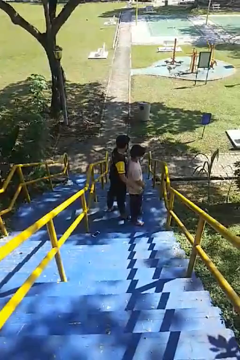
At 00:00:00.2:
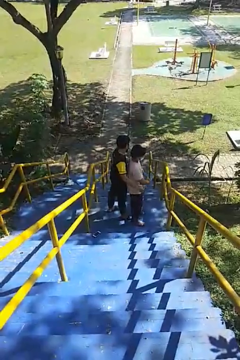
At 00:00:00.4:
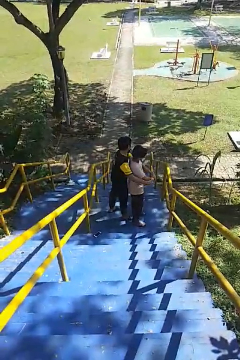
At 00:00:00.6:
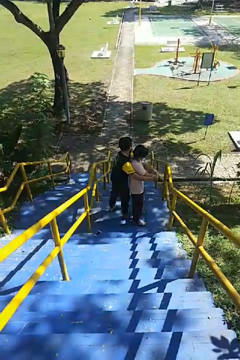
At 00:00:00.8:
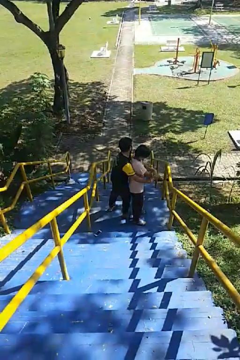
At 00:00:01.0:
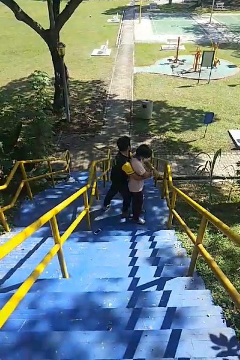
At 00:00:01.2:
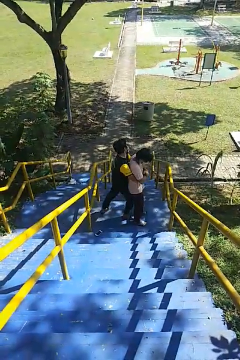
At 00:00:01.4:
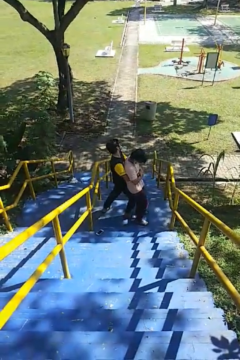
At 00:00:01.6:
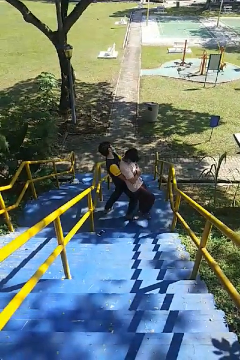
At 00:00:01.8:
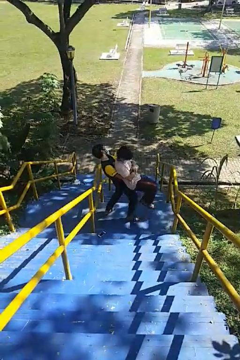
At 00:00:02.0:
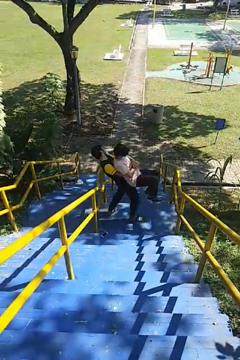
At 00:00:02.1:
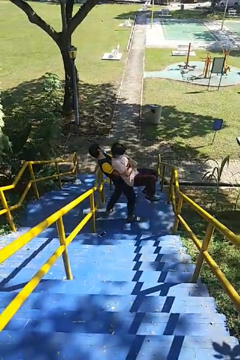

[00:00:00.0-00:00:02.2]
person picks up person

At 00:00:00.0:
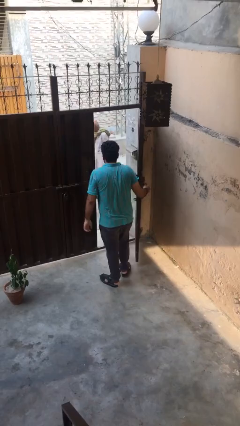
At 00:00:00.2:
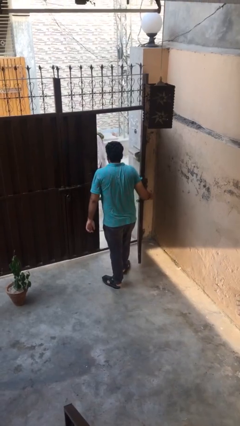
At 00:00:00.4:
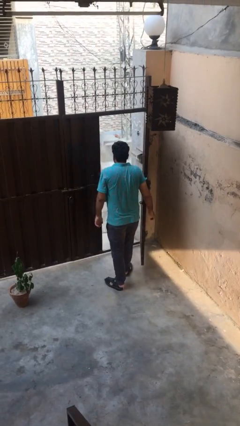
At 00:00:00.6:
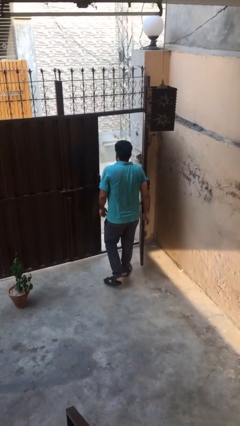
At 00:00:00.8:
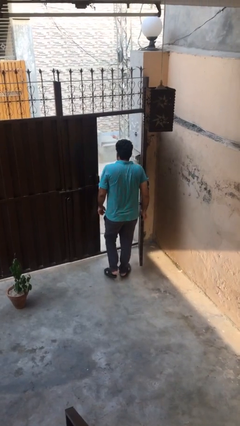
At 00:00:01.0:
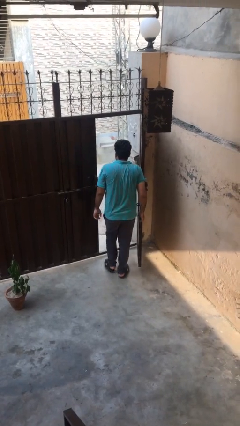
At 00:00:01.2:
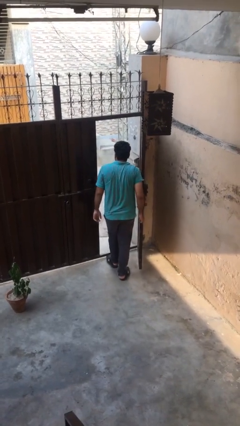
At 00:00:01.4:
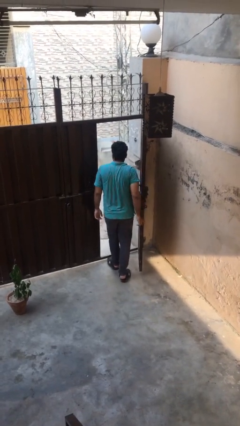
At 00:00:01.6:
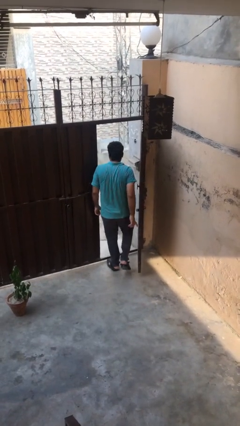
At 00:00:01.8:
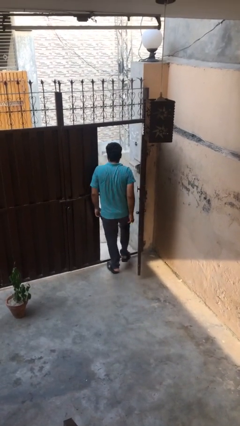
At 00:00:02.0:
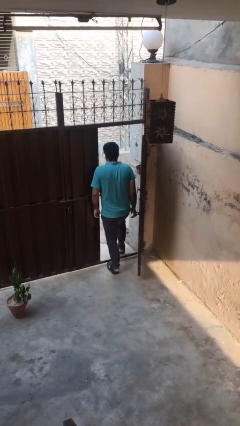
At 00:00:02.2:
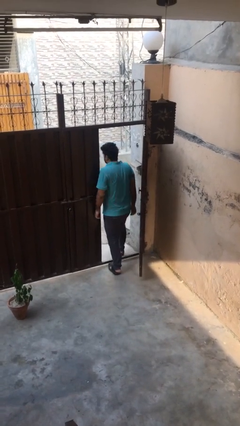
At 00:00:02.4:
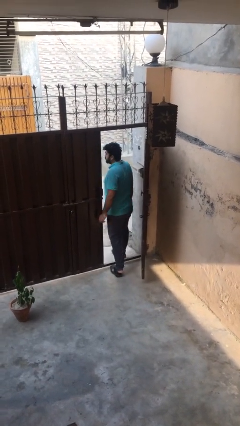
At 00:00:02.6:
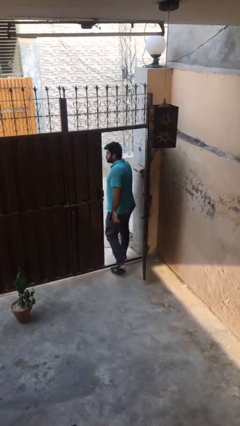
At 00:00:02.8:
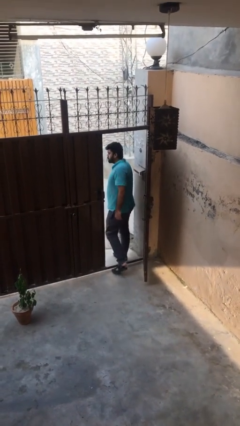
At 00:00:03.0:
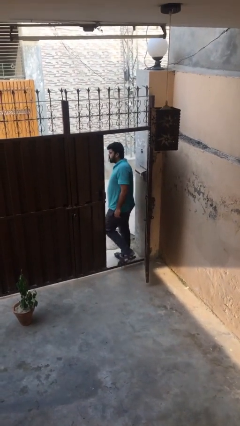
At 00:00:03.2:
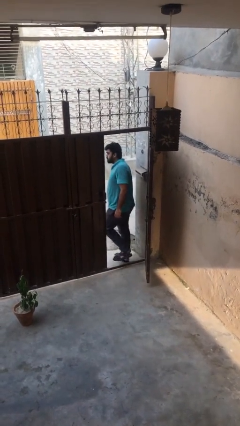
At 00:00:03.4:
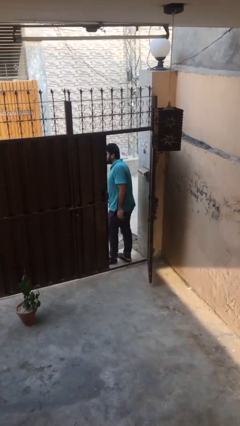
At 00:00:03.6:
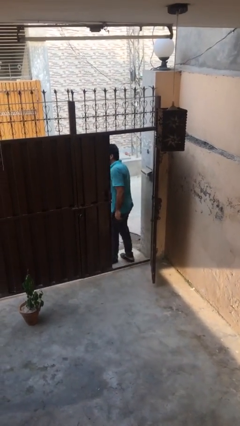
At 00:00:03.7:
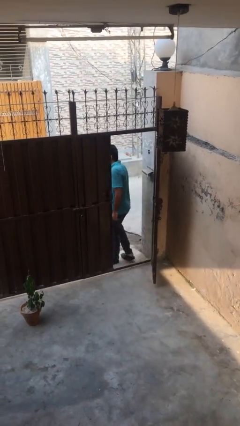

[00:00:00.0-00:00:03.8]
person exits scene through structure

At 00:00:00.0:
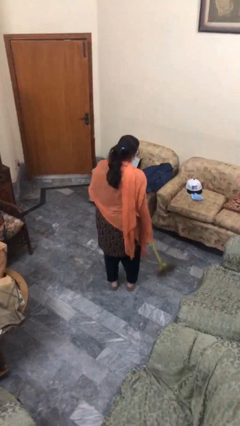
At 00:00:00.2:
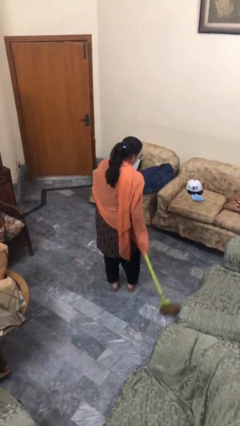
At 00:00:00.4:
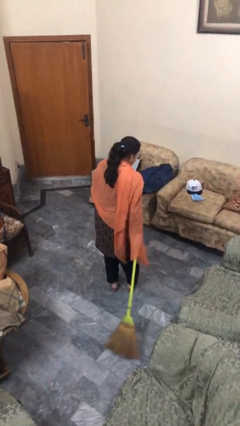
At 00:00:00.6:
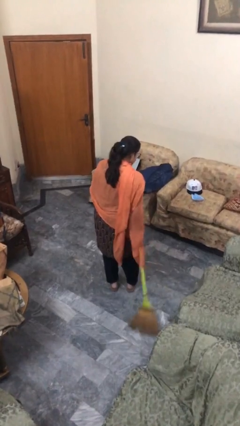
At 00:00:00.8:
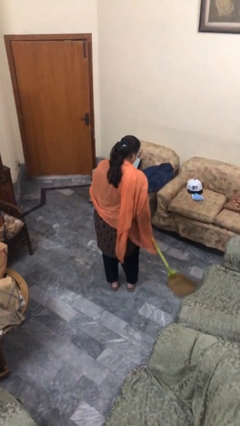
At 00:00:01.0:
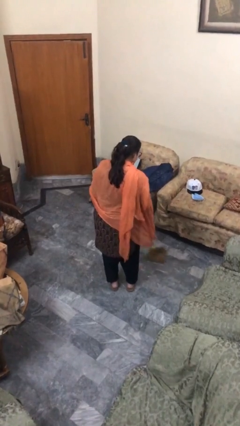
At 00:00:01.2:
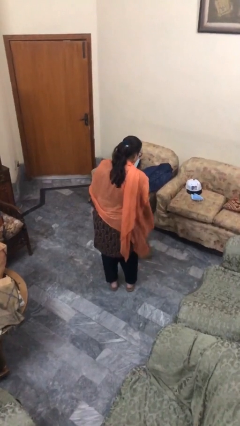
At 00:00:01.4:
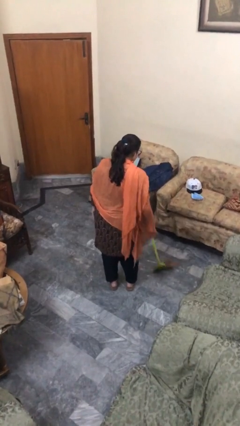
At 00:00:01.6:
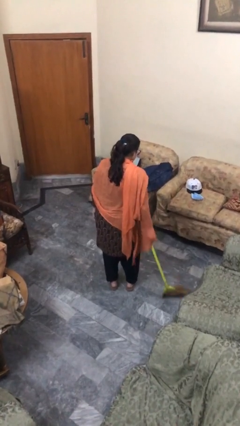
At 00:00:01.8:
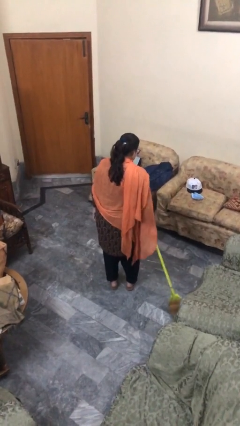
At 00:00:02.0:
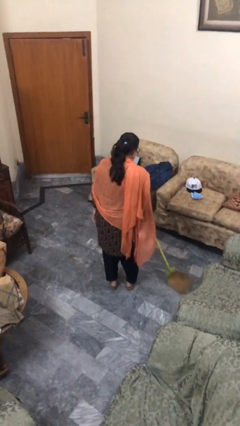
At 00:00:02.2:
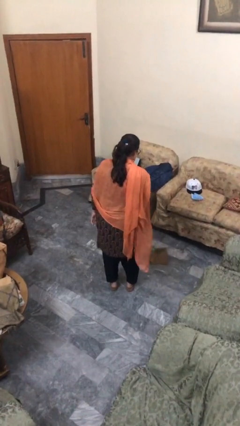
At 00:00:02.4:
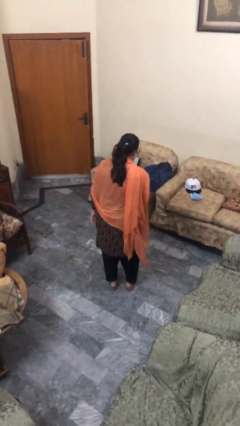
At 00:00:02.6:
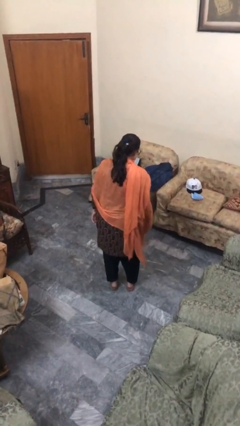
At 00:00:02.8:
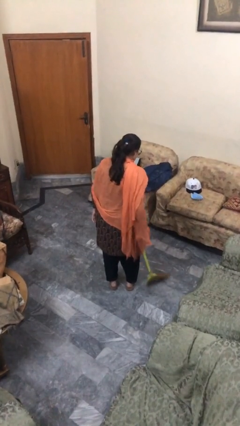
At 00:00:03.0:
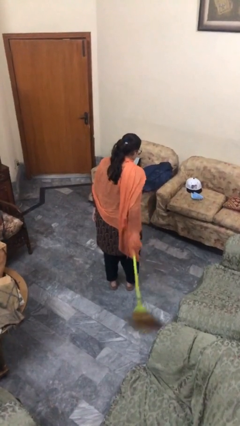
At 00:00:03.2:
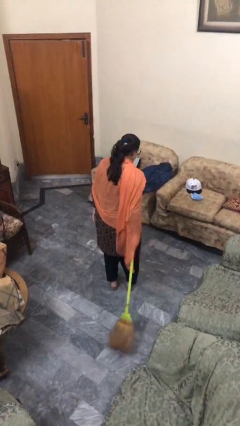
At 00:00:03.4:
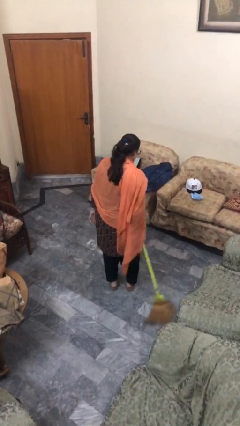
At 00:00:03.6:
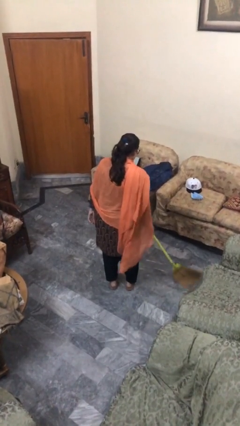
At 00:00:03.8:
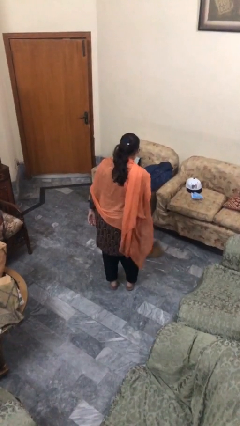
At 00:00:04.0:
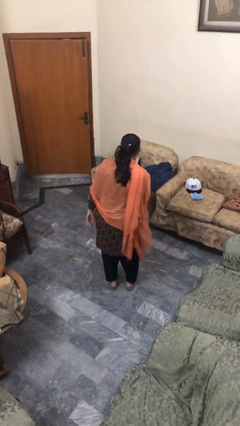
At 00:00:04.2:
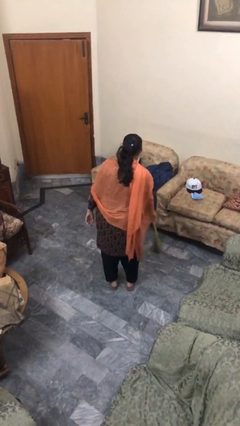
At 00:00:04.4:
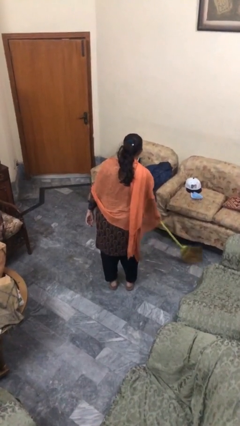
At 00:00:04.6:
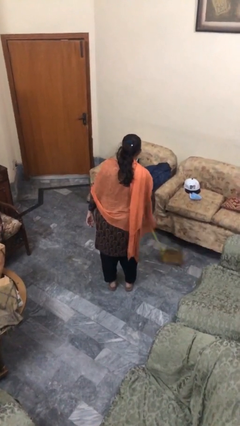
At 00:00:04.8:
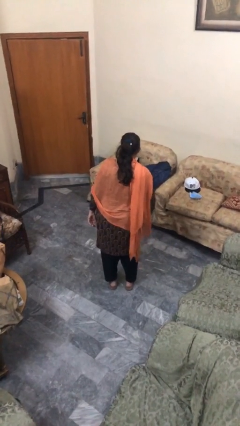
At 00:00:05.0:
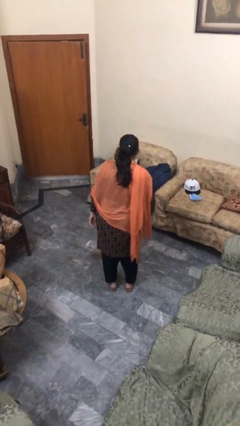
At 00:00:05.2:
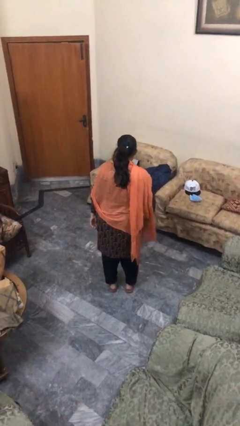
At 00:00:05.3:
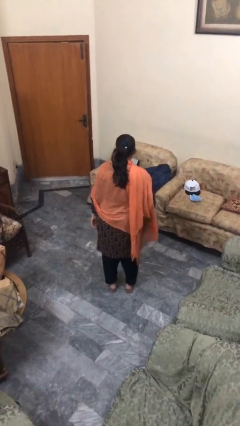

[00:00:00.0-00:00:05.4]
person sweeps floor

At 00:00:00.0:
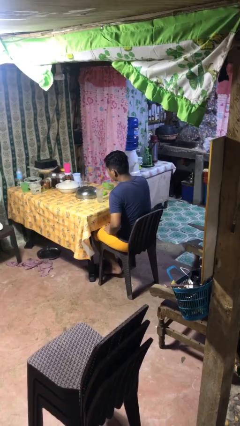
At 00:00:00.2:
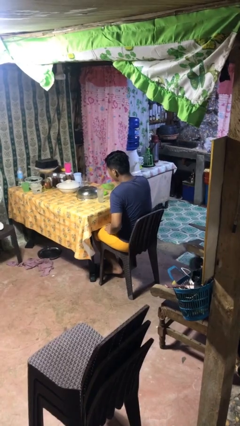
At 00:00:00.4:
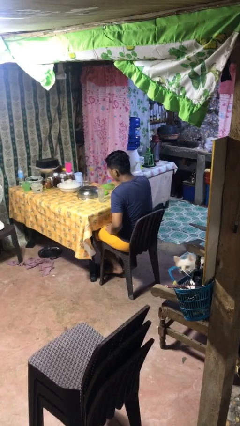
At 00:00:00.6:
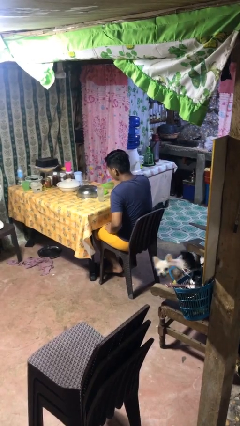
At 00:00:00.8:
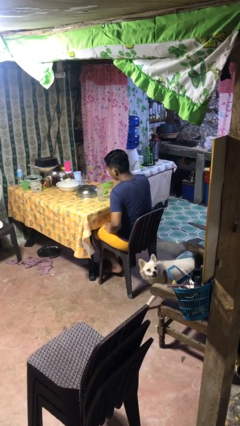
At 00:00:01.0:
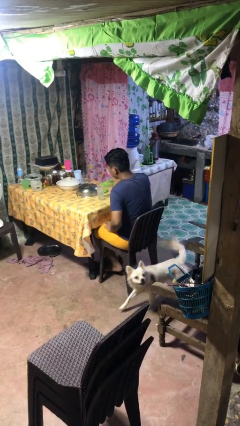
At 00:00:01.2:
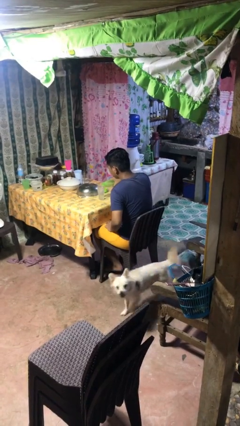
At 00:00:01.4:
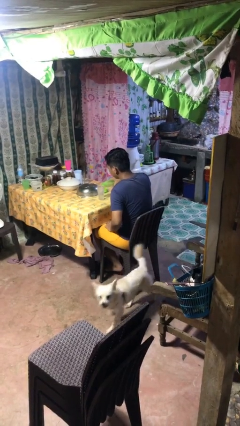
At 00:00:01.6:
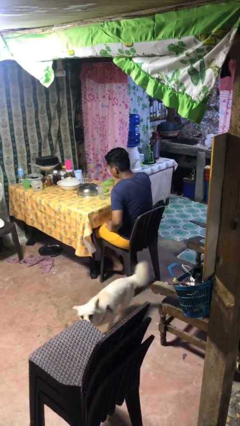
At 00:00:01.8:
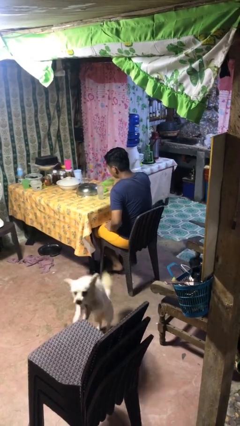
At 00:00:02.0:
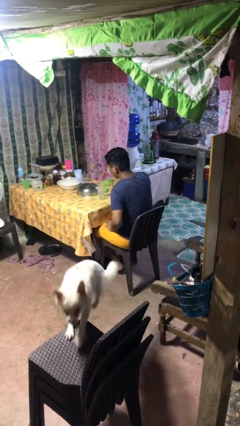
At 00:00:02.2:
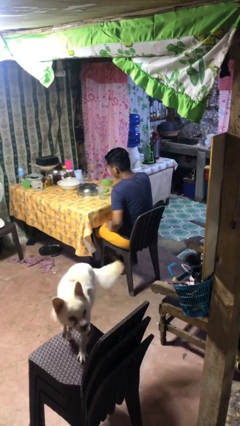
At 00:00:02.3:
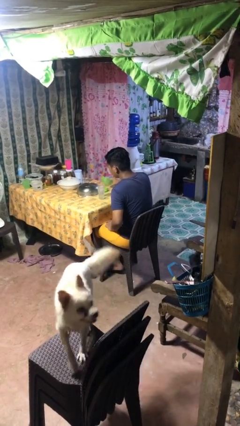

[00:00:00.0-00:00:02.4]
person pours liquid into cup

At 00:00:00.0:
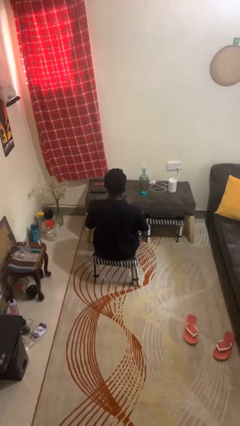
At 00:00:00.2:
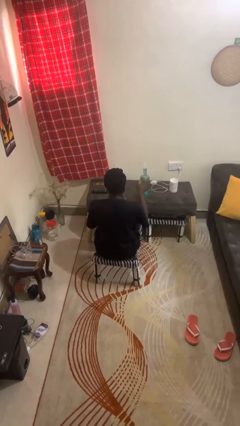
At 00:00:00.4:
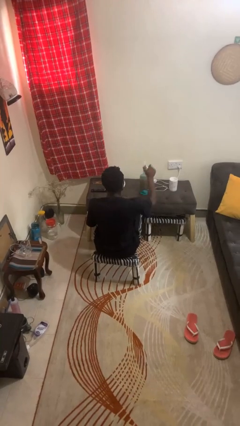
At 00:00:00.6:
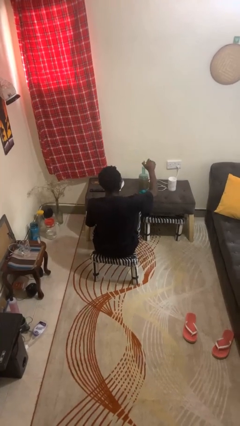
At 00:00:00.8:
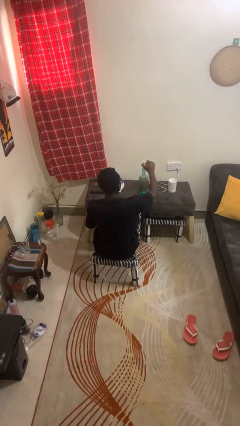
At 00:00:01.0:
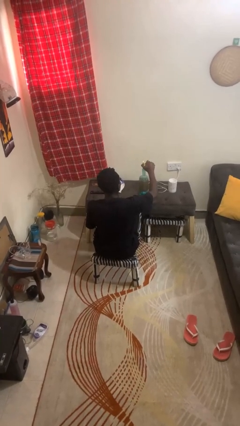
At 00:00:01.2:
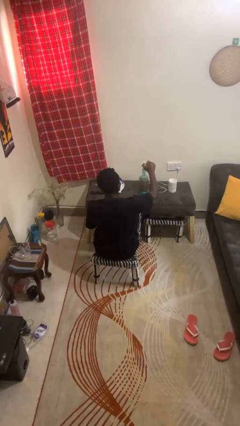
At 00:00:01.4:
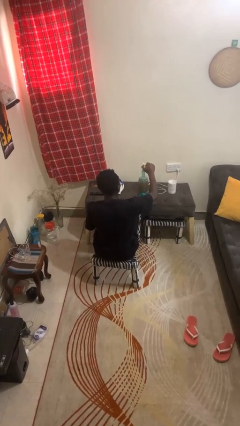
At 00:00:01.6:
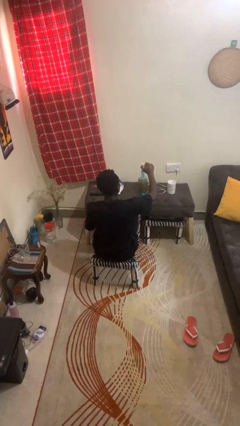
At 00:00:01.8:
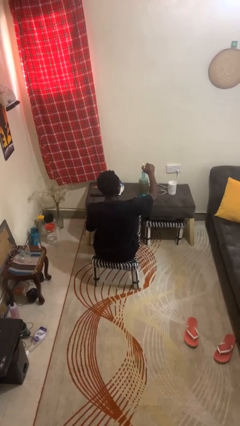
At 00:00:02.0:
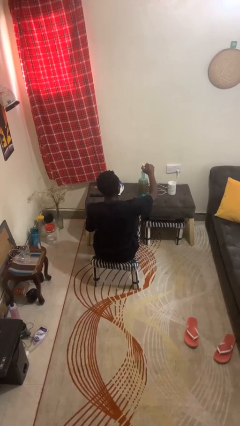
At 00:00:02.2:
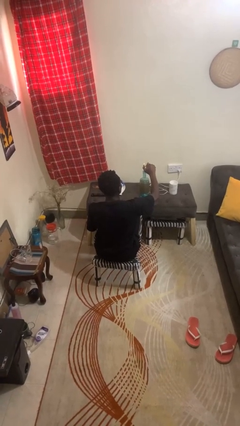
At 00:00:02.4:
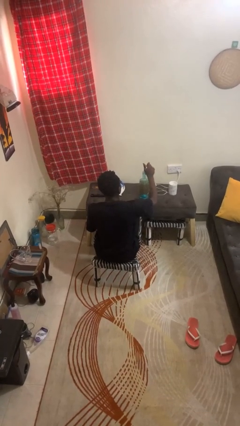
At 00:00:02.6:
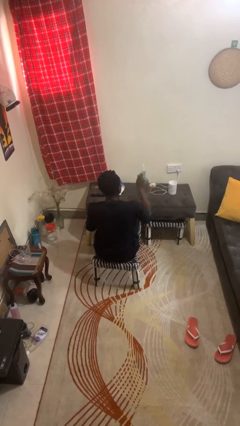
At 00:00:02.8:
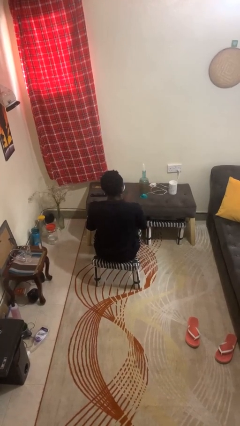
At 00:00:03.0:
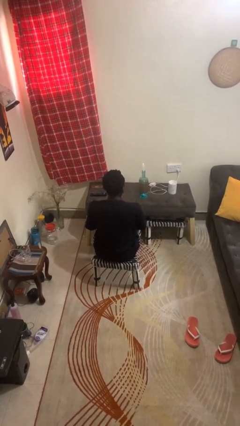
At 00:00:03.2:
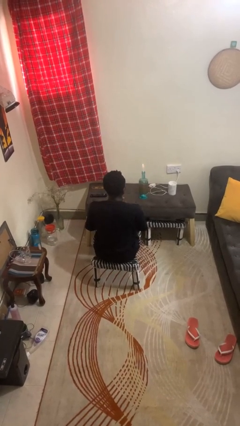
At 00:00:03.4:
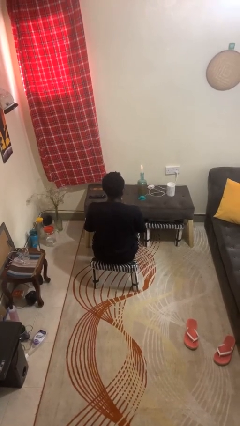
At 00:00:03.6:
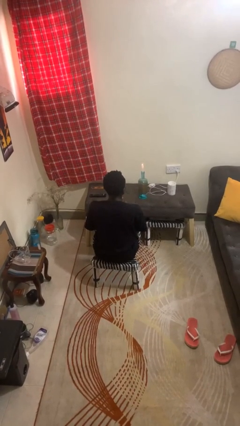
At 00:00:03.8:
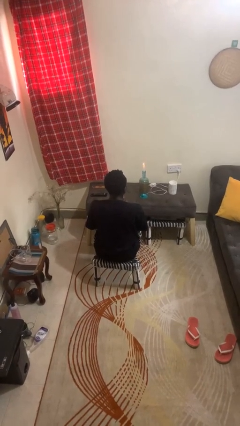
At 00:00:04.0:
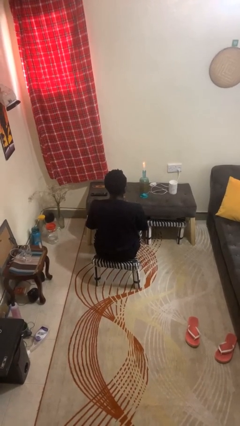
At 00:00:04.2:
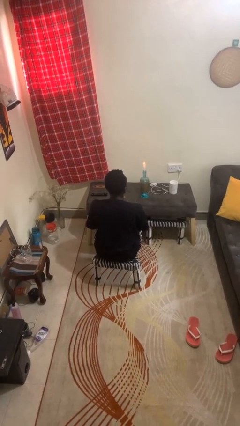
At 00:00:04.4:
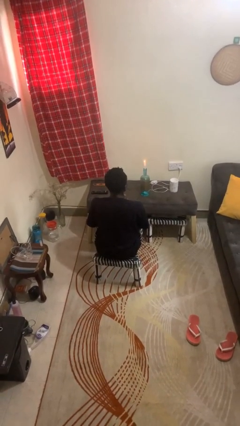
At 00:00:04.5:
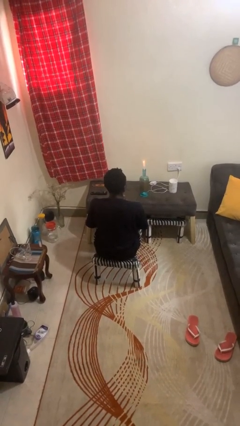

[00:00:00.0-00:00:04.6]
person lights candle
